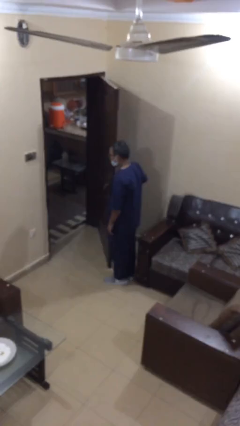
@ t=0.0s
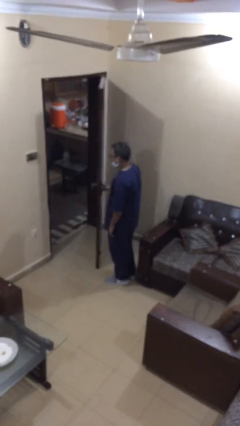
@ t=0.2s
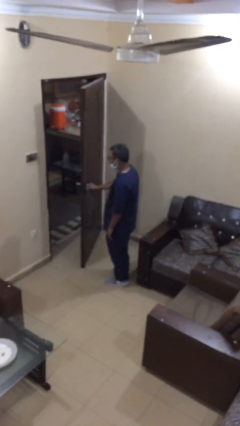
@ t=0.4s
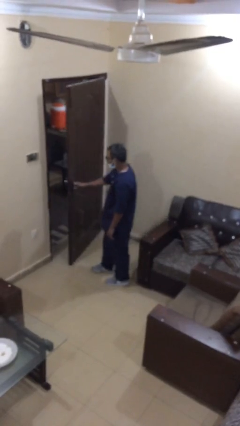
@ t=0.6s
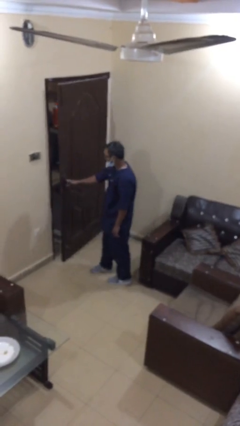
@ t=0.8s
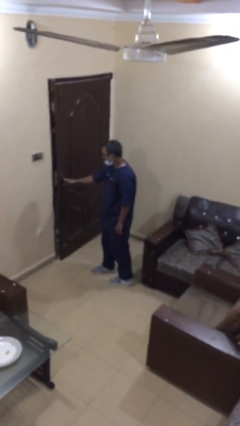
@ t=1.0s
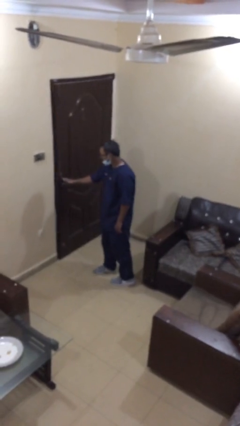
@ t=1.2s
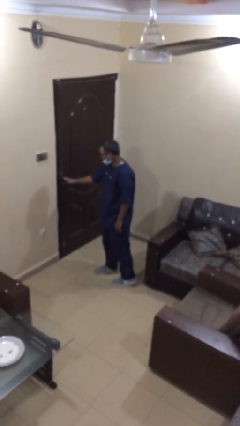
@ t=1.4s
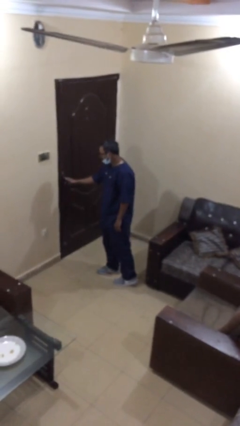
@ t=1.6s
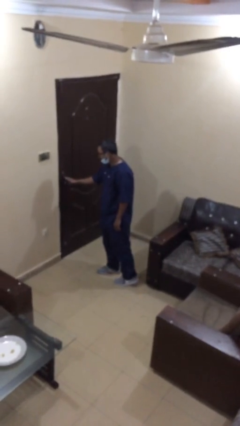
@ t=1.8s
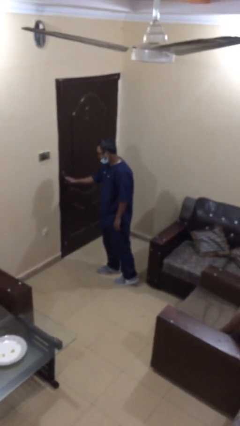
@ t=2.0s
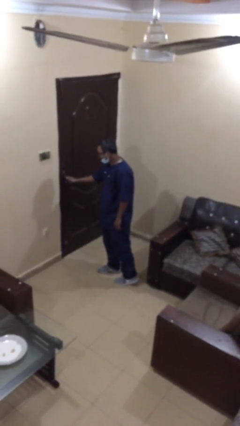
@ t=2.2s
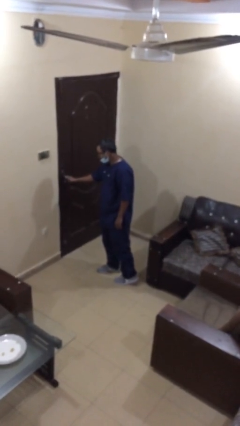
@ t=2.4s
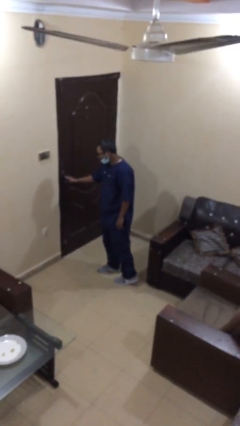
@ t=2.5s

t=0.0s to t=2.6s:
person closes facility door

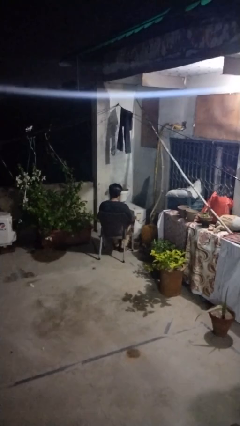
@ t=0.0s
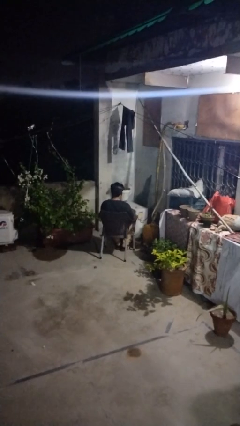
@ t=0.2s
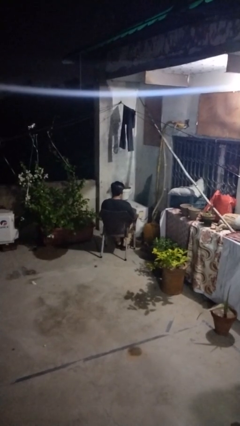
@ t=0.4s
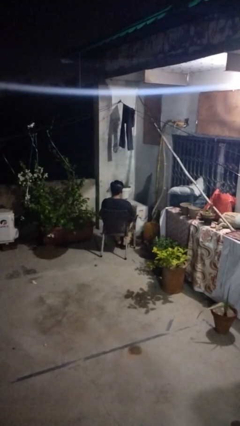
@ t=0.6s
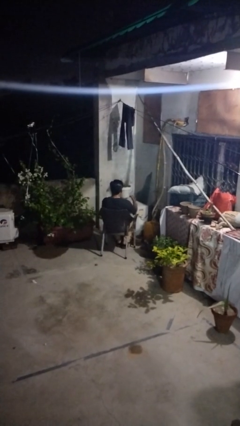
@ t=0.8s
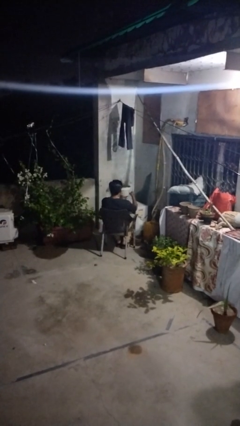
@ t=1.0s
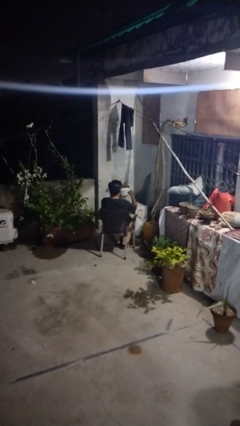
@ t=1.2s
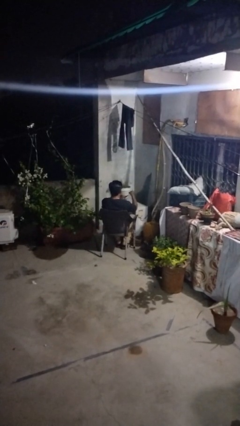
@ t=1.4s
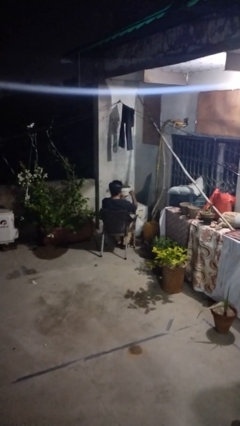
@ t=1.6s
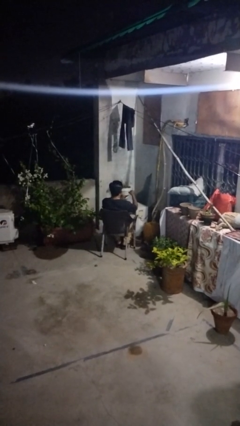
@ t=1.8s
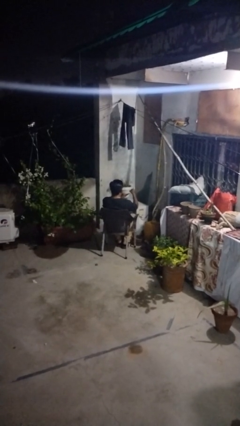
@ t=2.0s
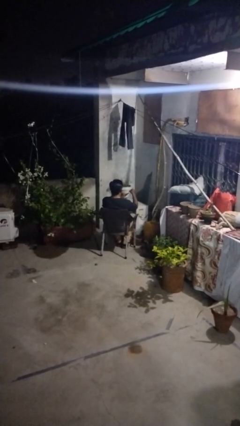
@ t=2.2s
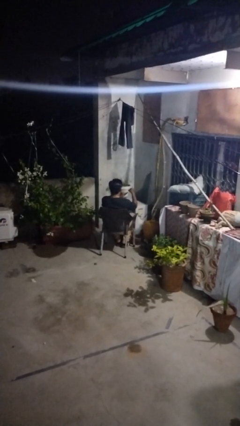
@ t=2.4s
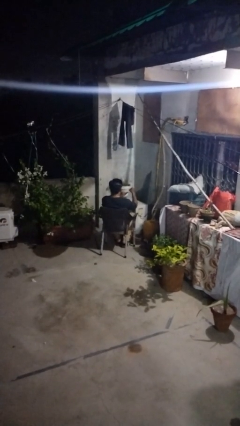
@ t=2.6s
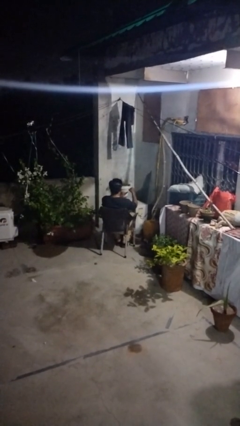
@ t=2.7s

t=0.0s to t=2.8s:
person paints fingernails

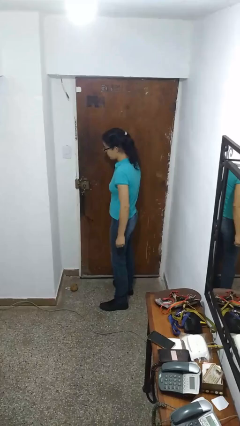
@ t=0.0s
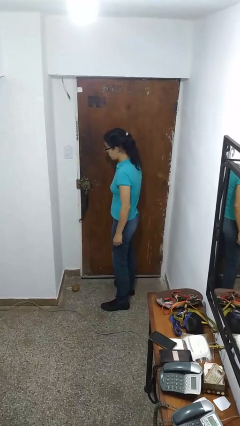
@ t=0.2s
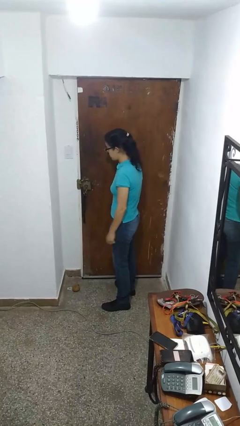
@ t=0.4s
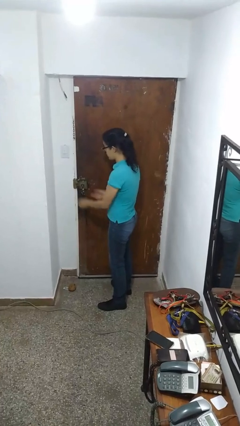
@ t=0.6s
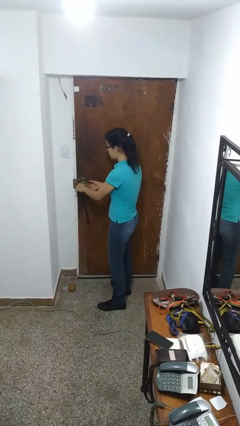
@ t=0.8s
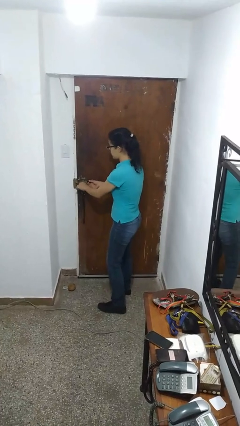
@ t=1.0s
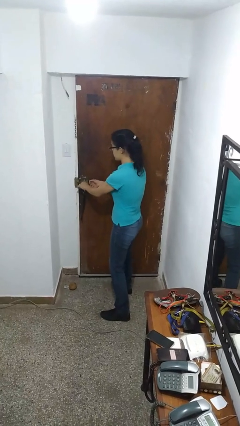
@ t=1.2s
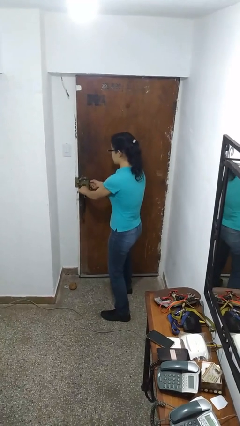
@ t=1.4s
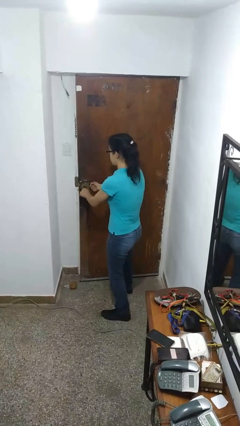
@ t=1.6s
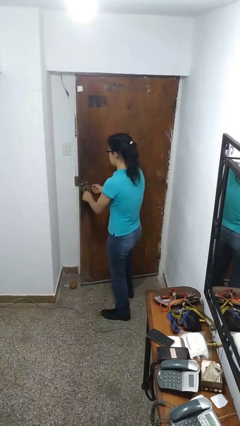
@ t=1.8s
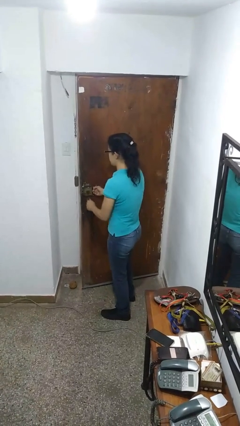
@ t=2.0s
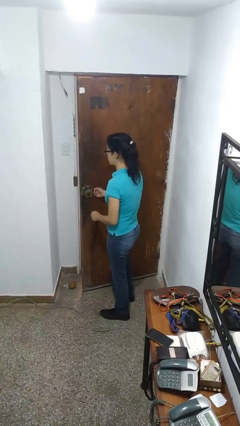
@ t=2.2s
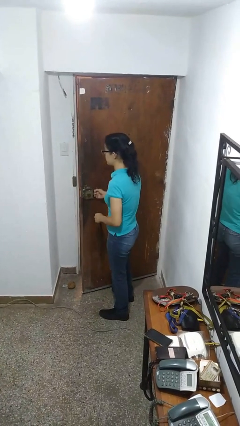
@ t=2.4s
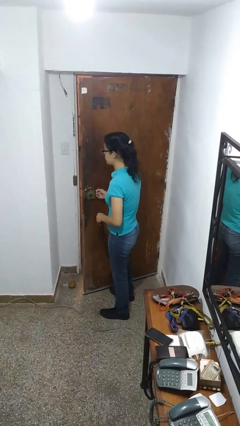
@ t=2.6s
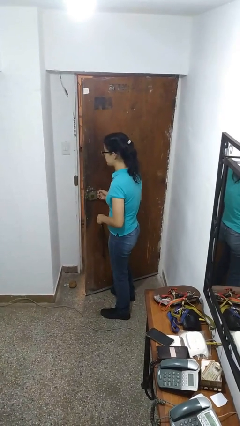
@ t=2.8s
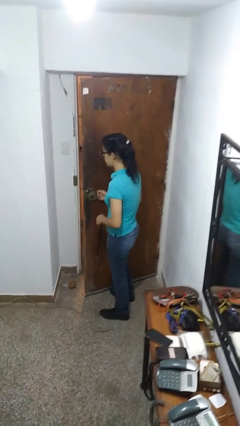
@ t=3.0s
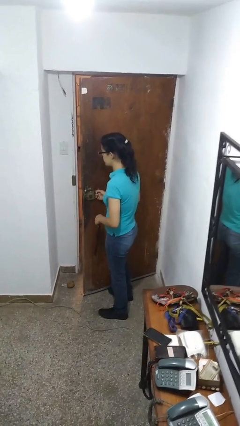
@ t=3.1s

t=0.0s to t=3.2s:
person opens facility door

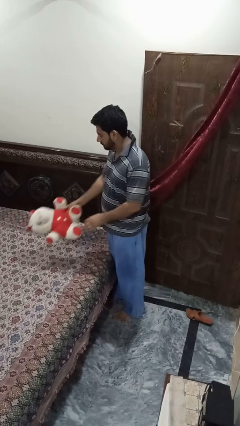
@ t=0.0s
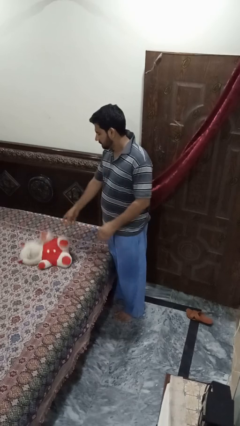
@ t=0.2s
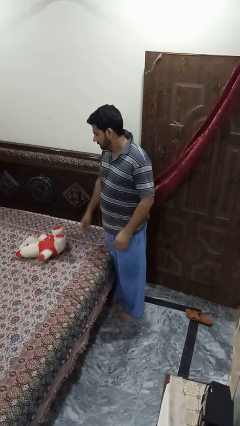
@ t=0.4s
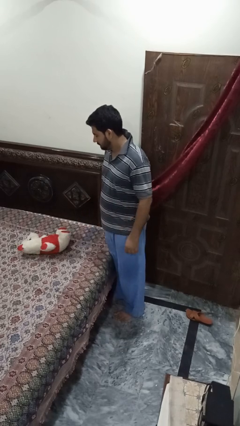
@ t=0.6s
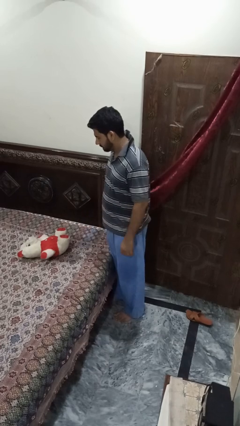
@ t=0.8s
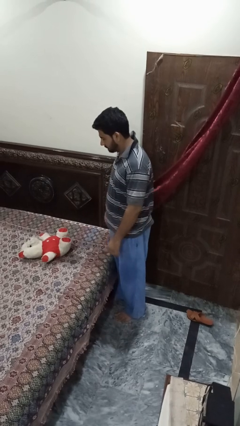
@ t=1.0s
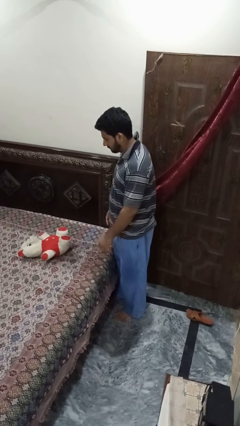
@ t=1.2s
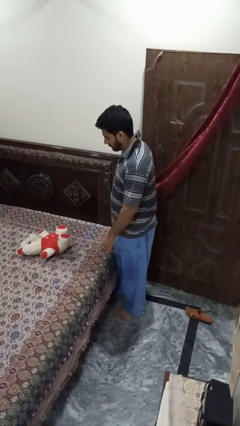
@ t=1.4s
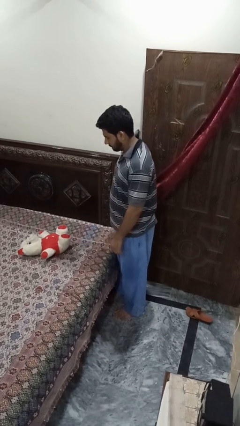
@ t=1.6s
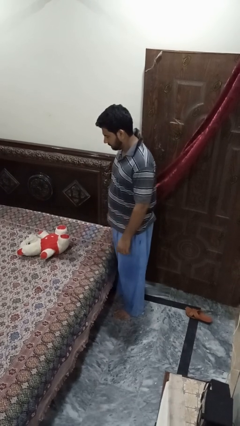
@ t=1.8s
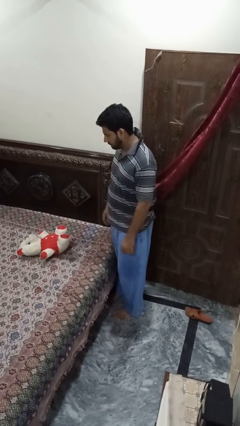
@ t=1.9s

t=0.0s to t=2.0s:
person puts down object on bed

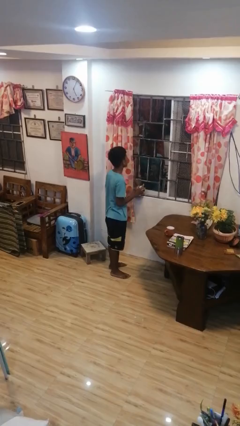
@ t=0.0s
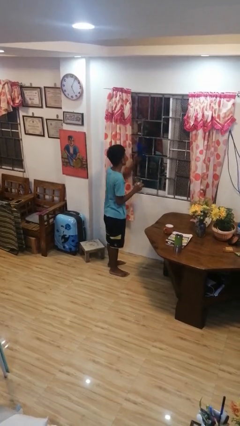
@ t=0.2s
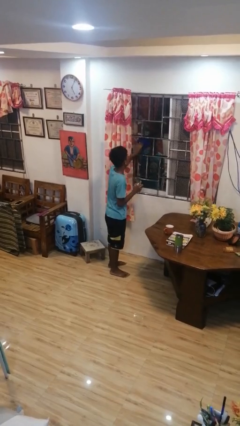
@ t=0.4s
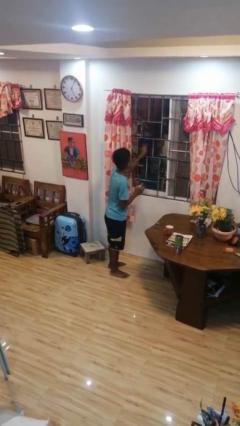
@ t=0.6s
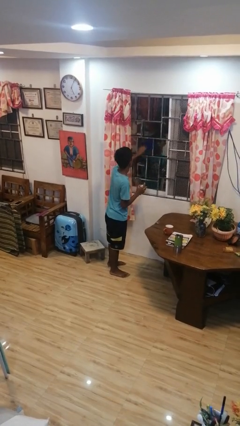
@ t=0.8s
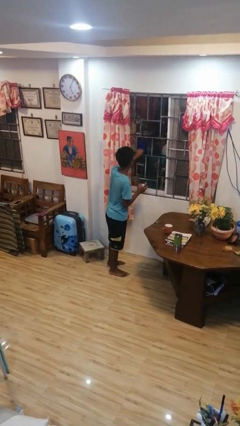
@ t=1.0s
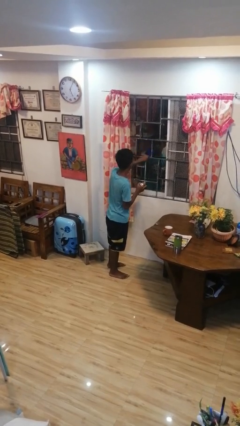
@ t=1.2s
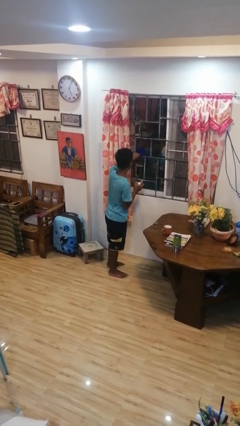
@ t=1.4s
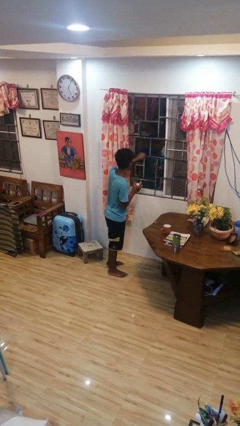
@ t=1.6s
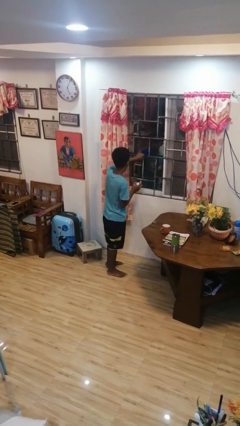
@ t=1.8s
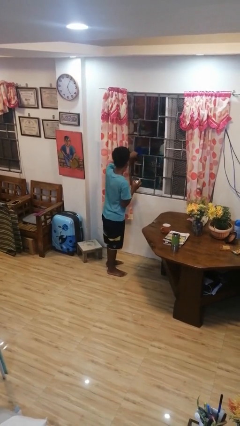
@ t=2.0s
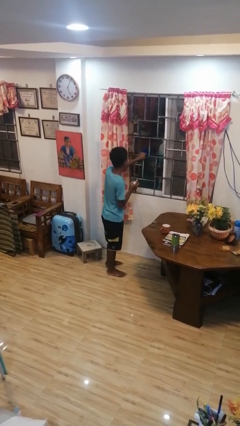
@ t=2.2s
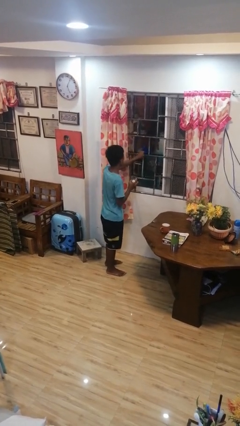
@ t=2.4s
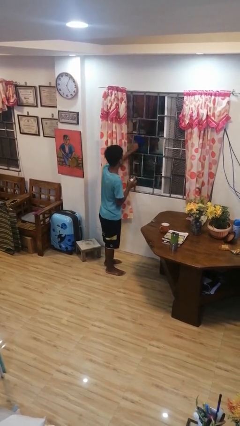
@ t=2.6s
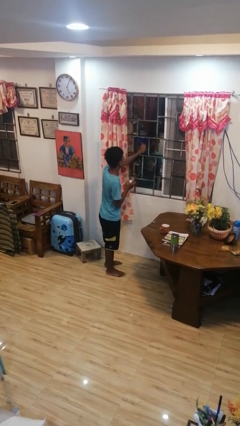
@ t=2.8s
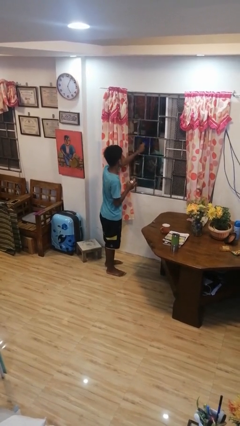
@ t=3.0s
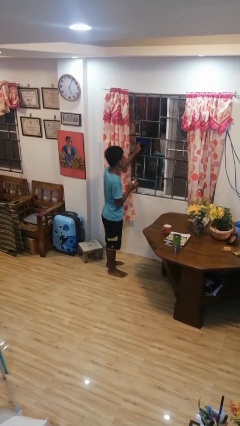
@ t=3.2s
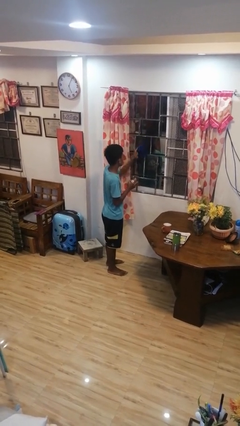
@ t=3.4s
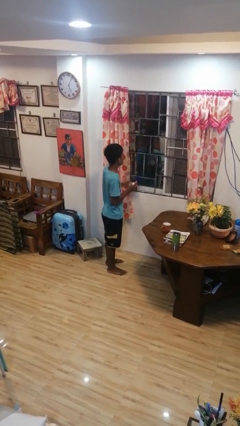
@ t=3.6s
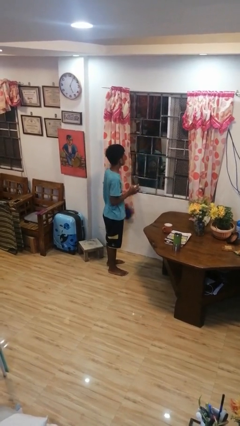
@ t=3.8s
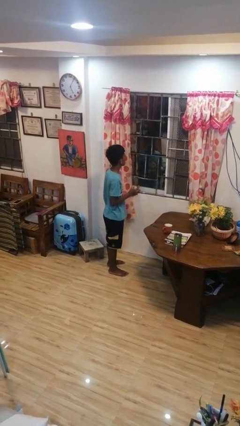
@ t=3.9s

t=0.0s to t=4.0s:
person washes window

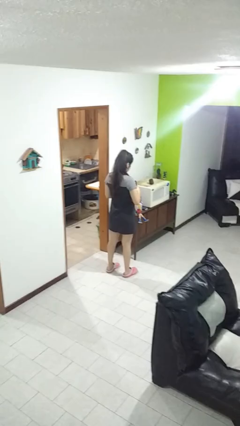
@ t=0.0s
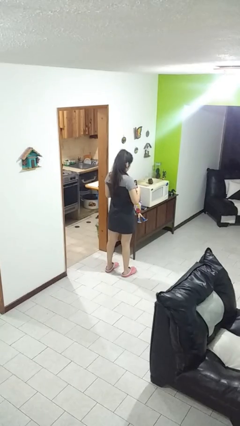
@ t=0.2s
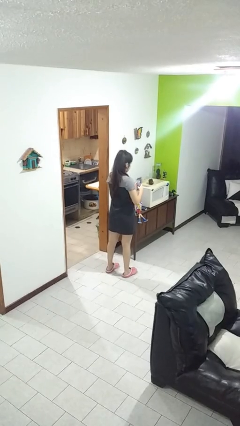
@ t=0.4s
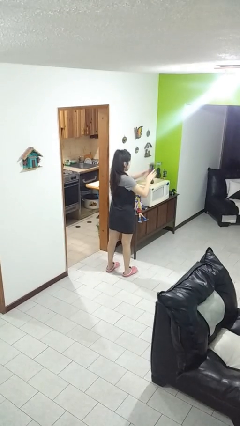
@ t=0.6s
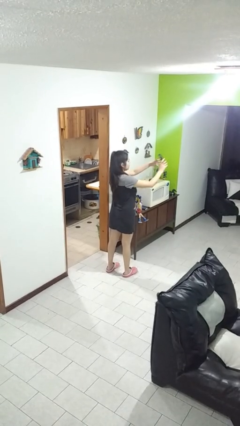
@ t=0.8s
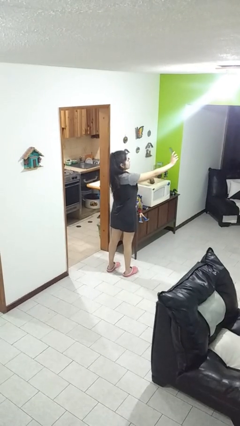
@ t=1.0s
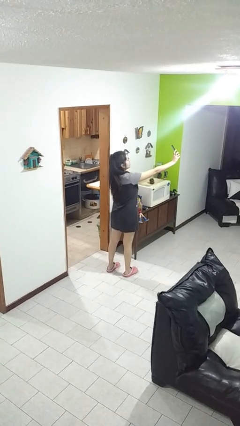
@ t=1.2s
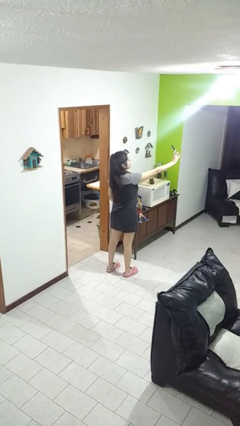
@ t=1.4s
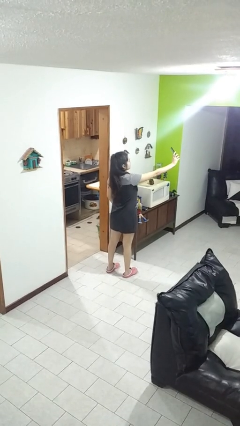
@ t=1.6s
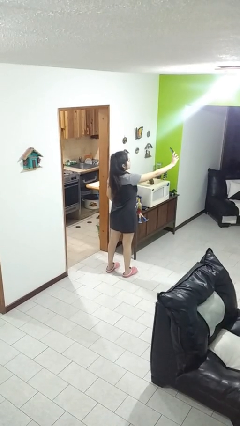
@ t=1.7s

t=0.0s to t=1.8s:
person takes selfie

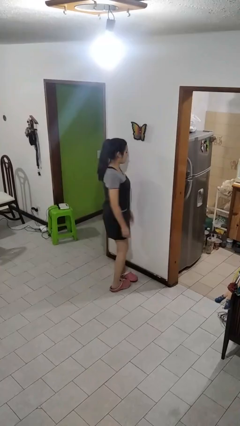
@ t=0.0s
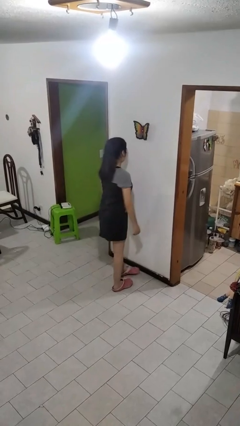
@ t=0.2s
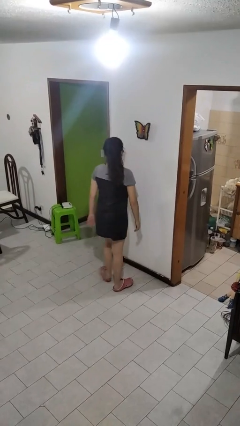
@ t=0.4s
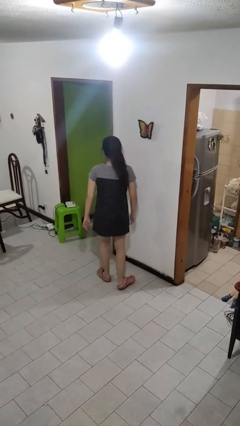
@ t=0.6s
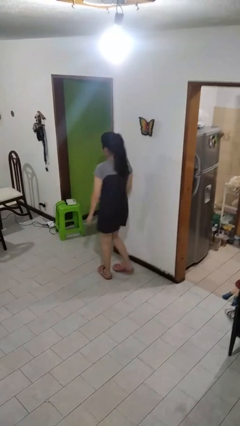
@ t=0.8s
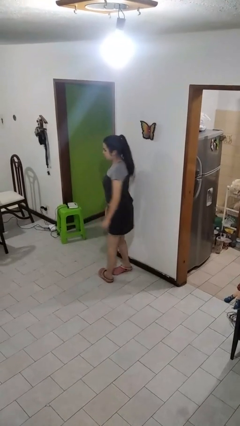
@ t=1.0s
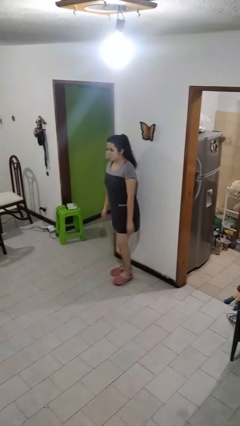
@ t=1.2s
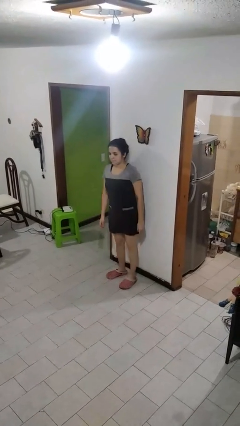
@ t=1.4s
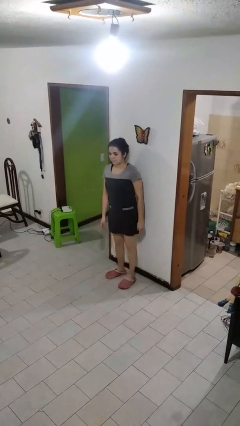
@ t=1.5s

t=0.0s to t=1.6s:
person twirls
